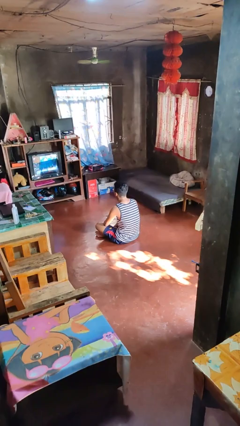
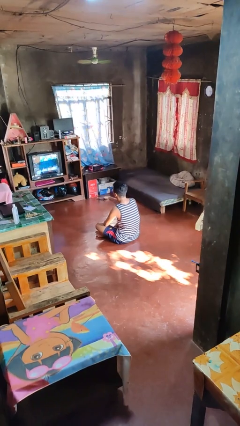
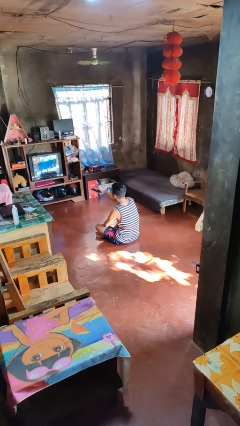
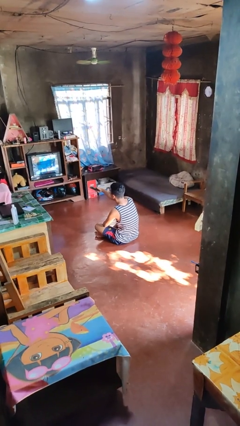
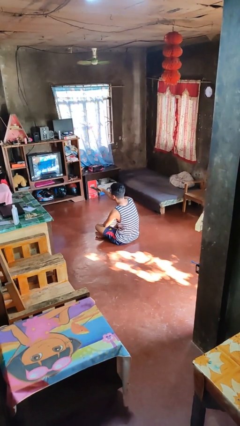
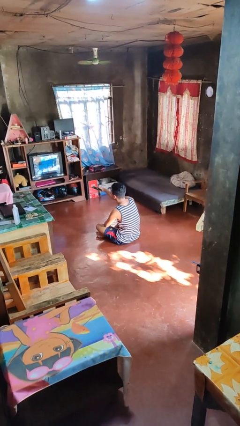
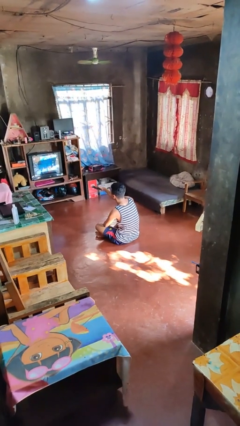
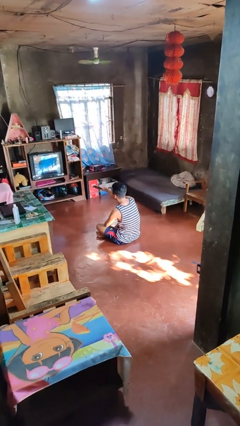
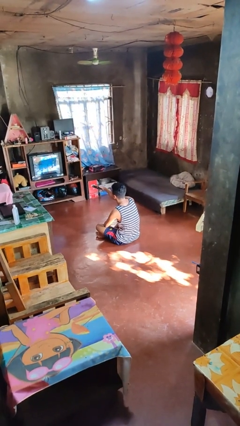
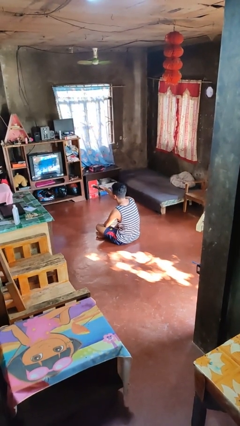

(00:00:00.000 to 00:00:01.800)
person uses television remote

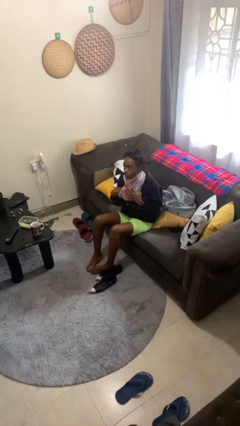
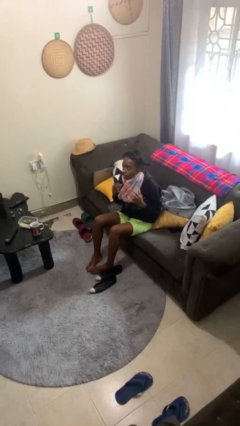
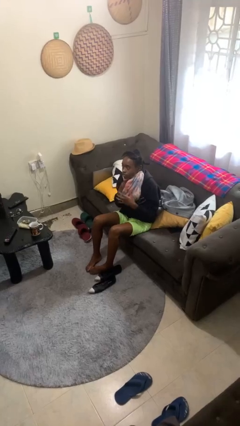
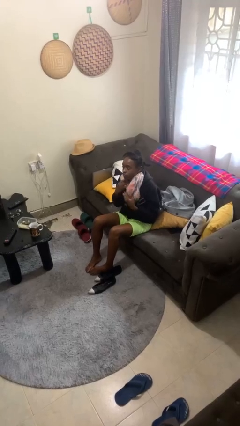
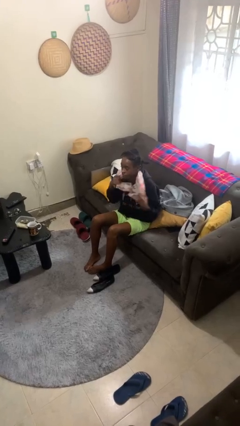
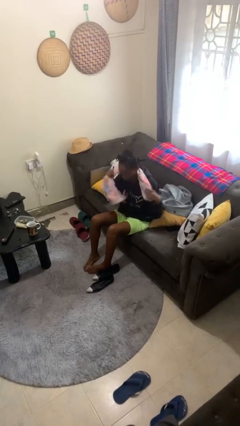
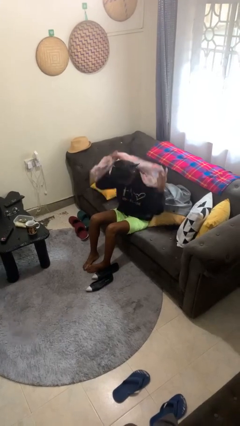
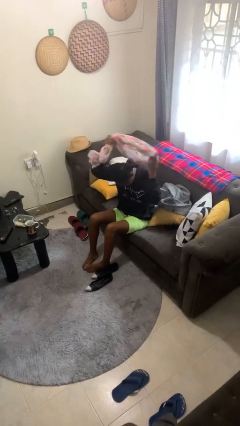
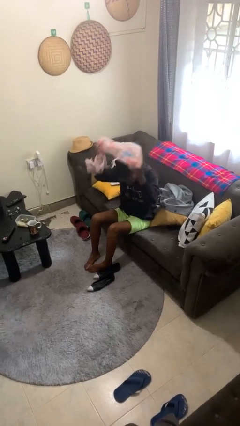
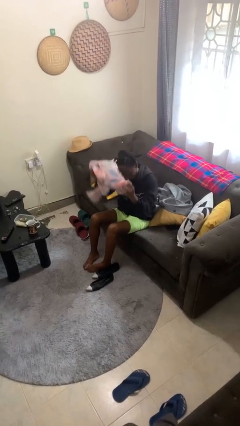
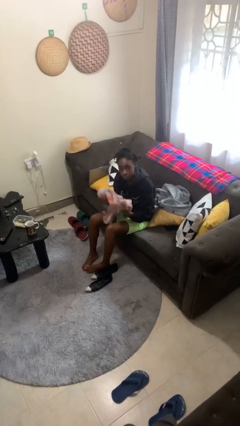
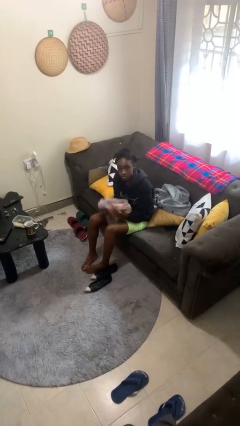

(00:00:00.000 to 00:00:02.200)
person takes off scarf

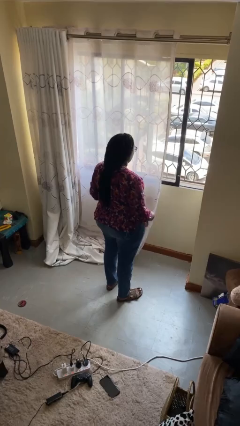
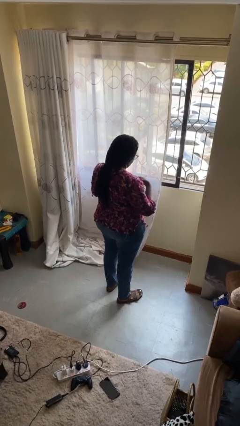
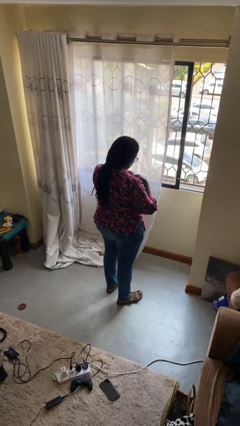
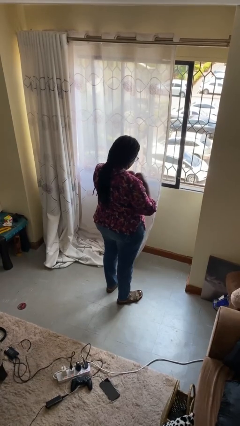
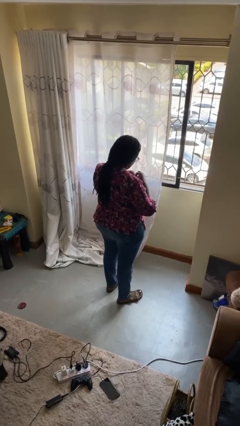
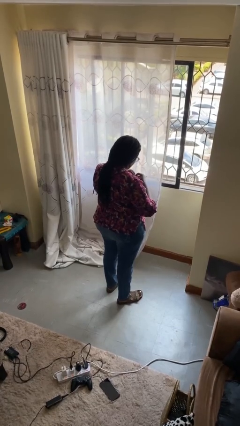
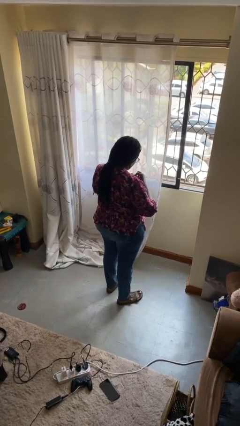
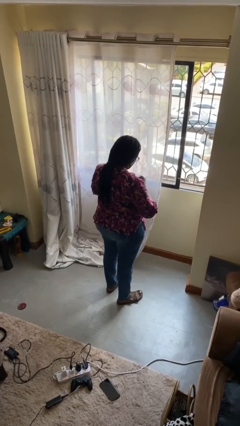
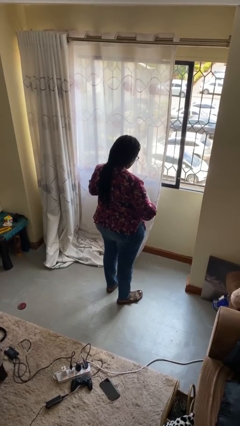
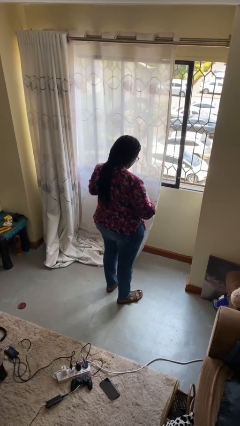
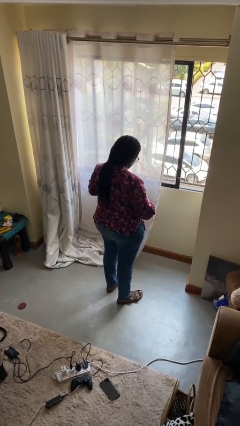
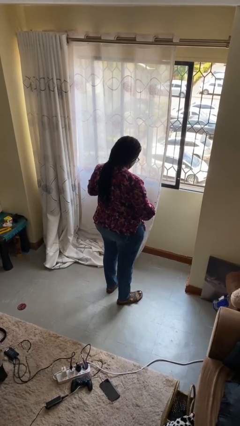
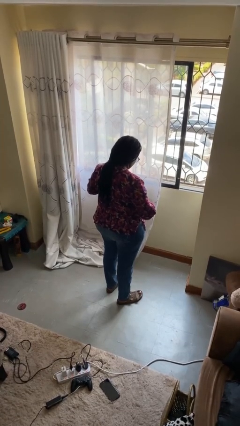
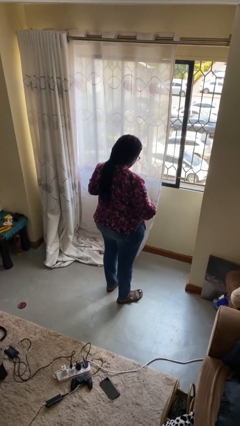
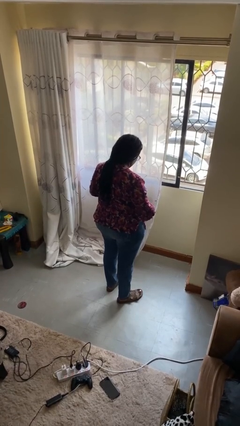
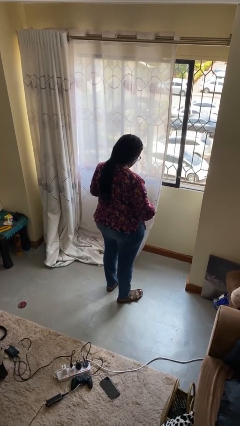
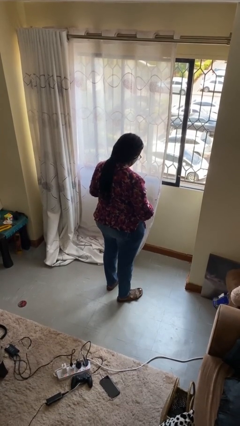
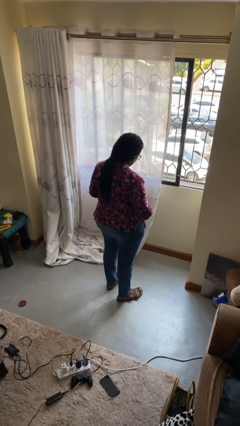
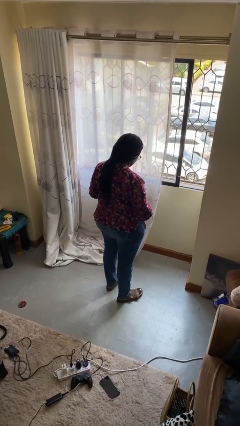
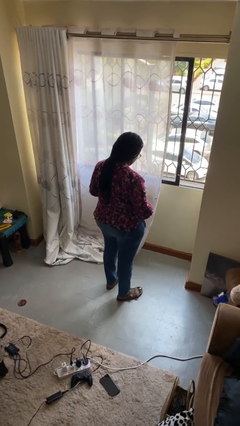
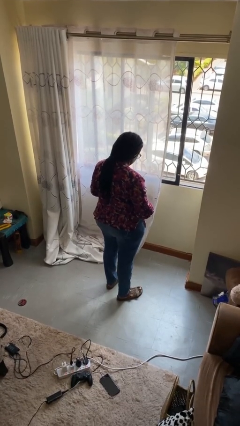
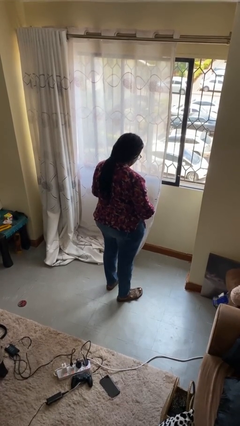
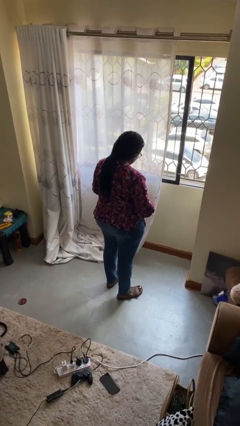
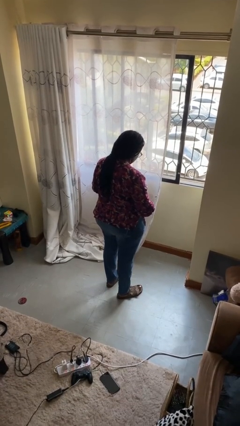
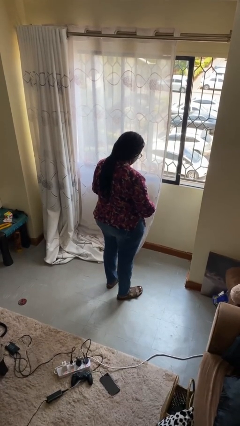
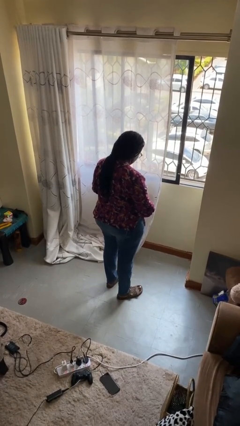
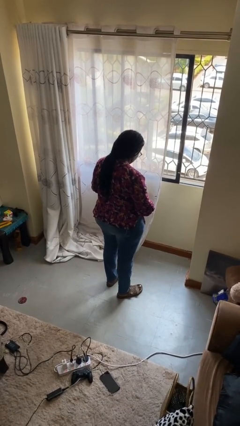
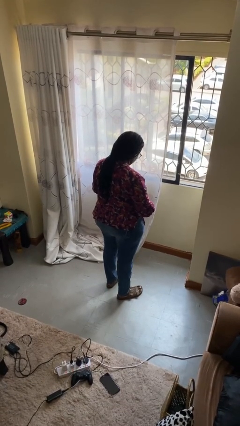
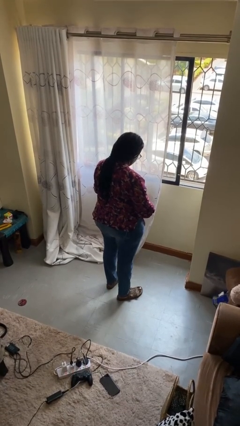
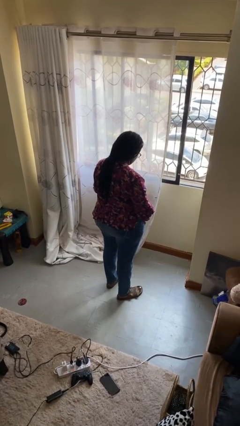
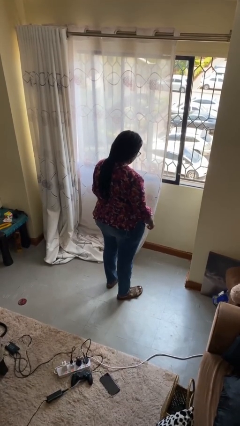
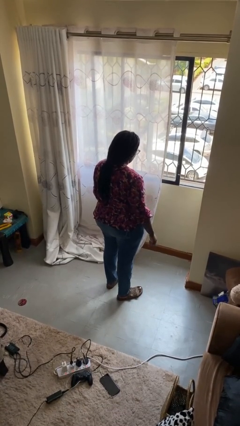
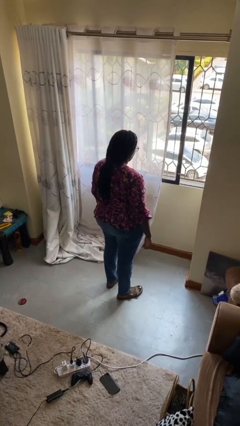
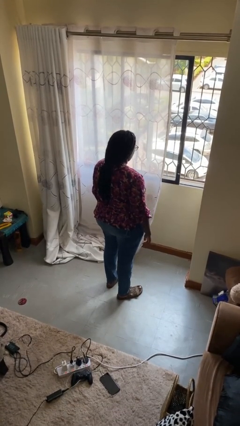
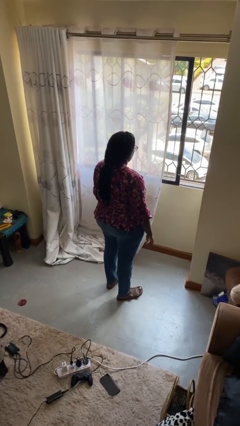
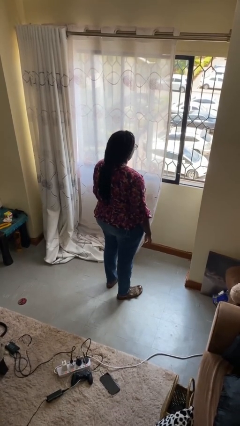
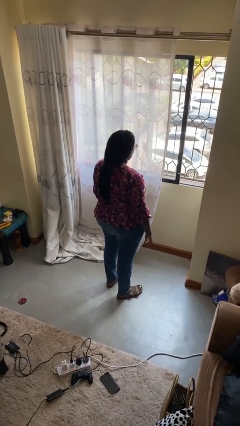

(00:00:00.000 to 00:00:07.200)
person unbuttons shirt

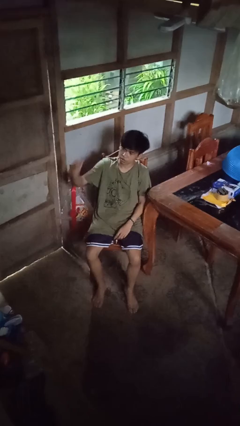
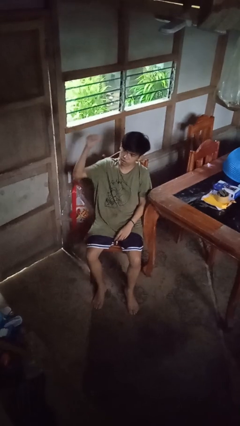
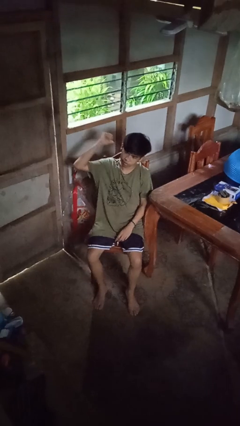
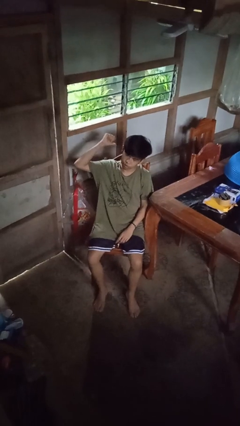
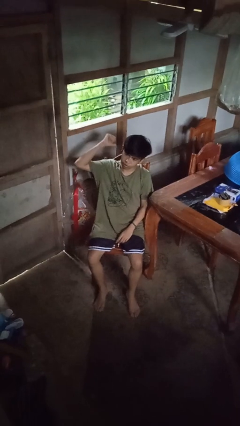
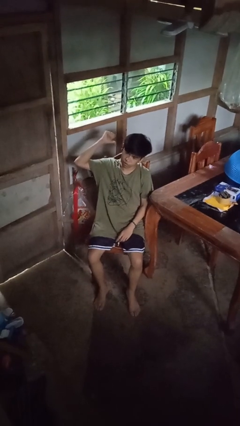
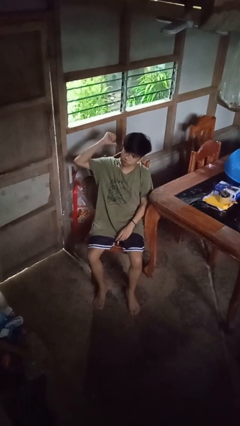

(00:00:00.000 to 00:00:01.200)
person gestures behind me

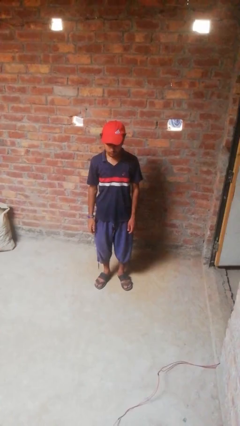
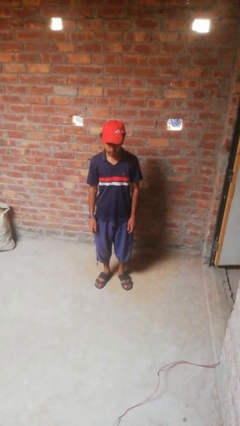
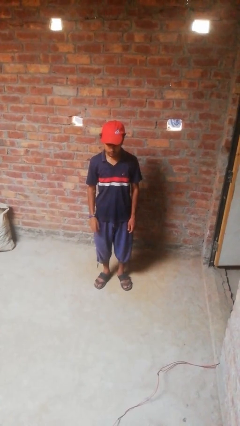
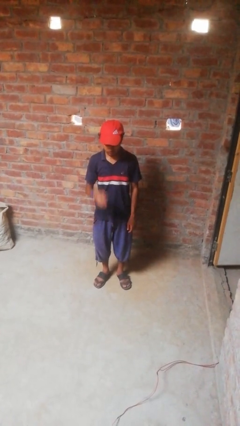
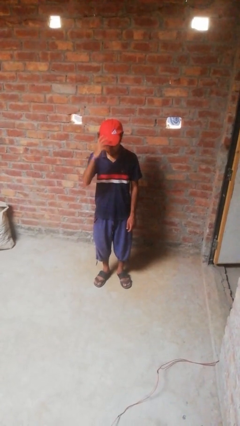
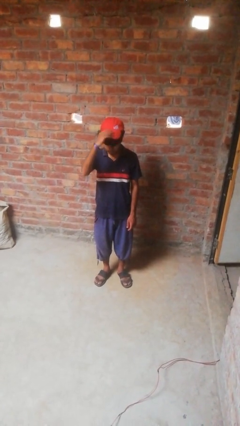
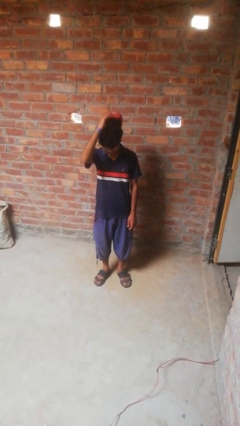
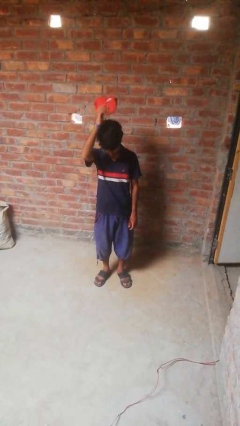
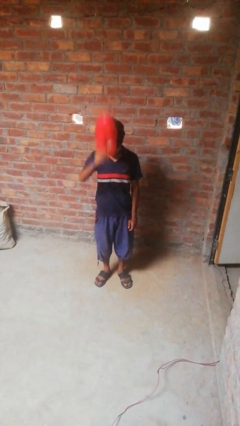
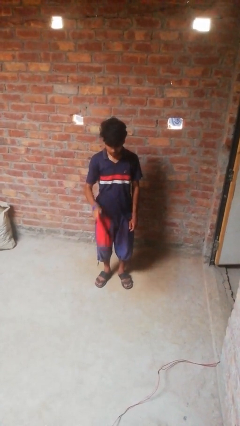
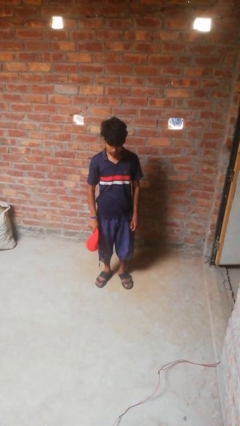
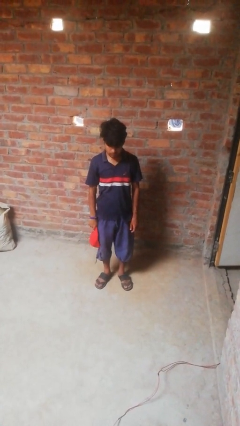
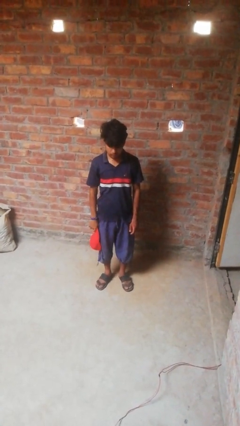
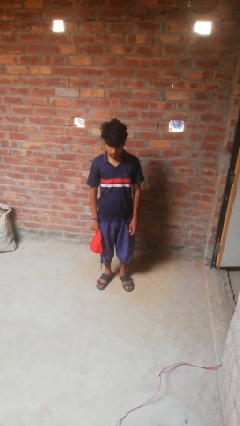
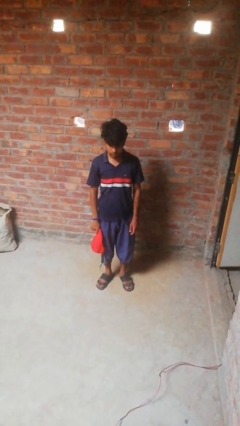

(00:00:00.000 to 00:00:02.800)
person takes off hat

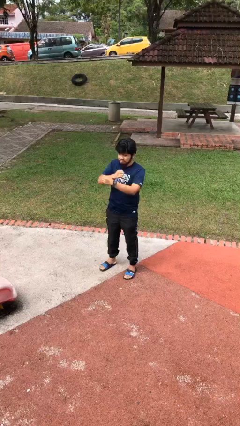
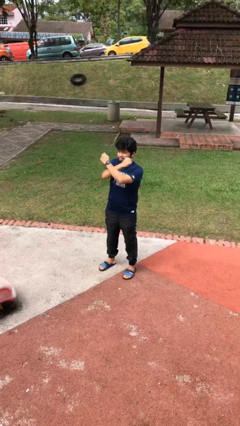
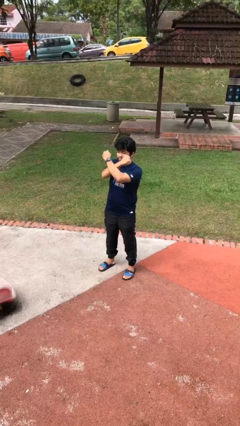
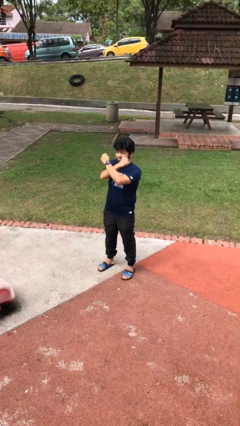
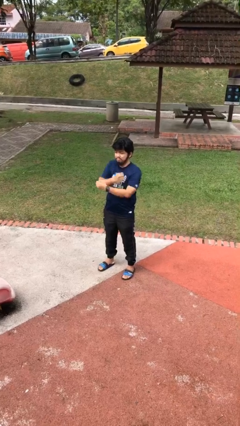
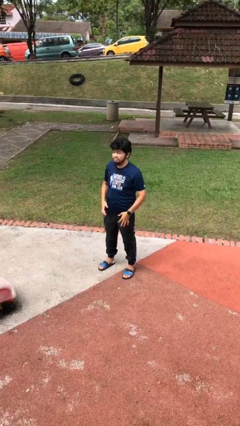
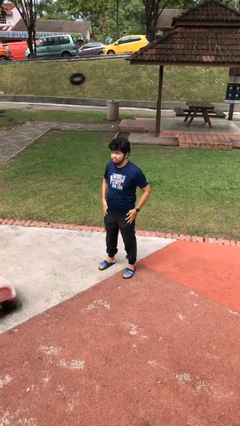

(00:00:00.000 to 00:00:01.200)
person gestures arms x

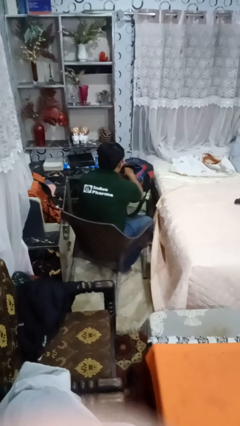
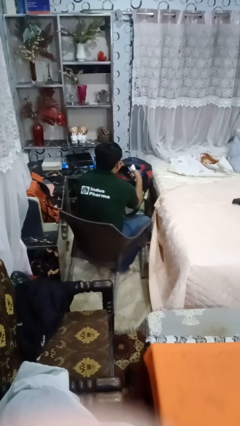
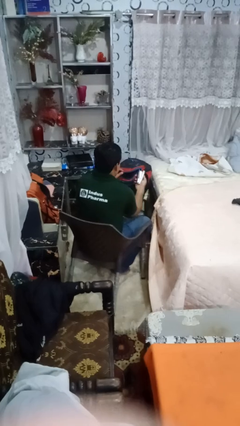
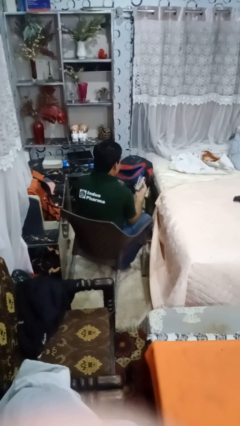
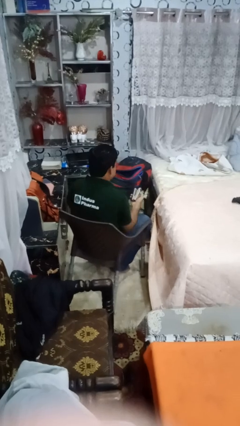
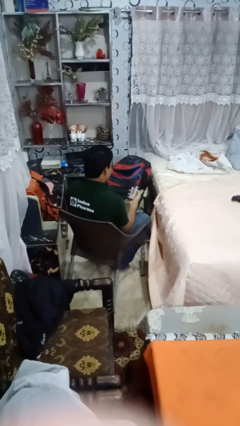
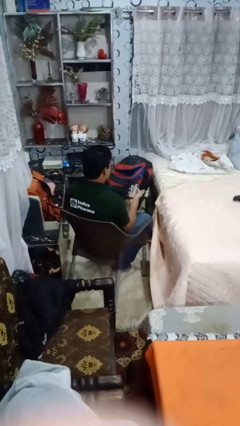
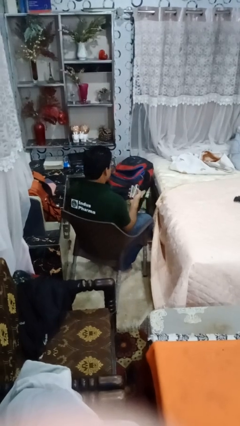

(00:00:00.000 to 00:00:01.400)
person takes object from backpack
